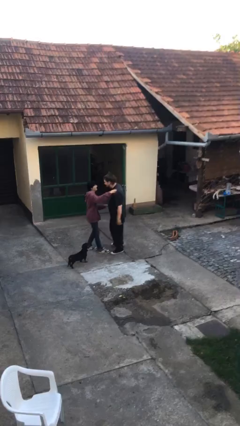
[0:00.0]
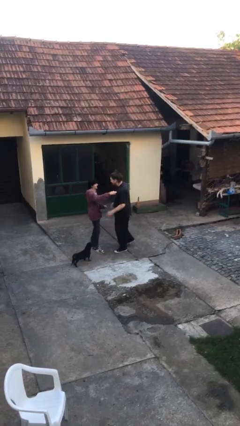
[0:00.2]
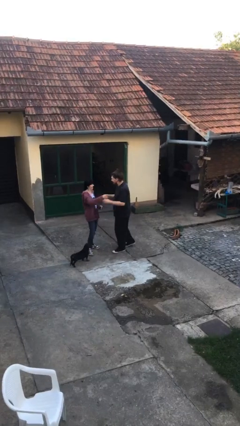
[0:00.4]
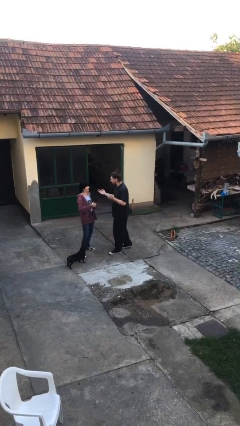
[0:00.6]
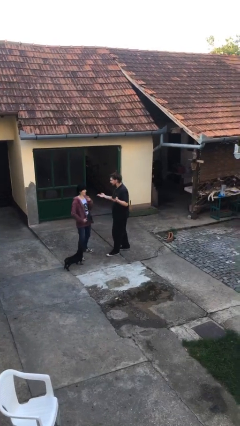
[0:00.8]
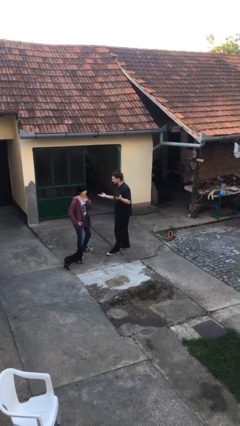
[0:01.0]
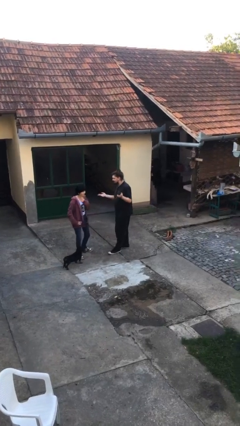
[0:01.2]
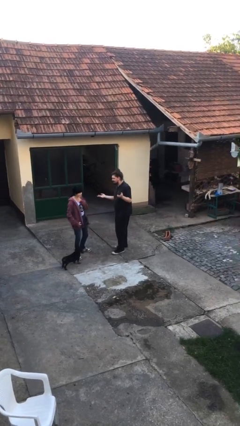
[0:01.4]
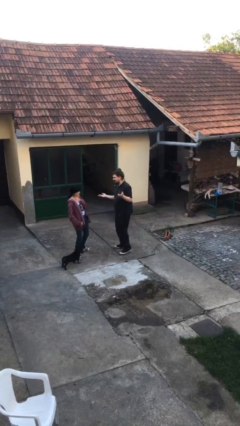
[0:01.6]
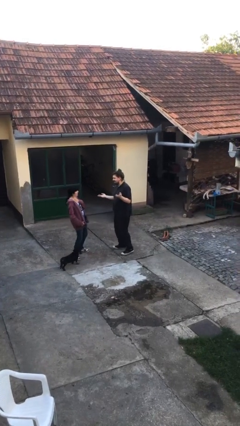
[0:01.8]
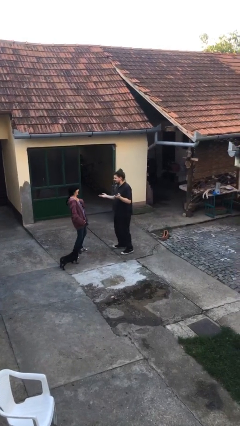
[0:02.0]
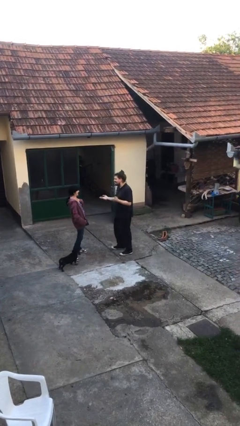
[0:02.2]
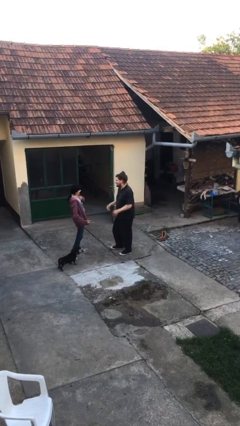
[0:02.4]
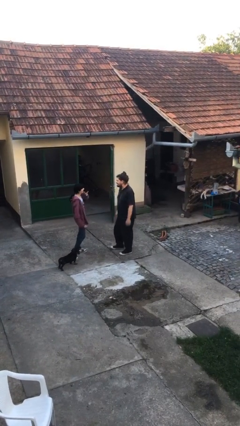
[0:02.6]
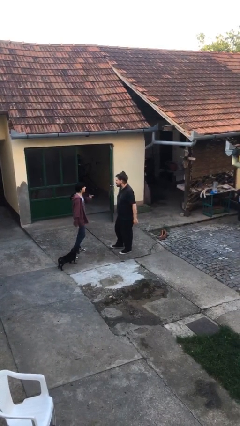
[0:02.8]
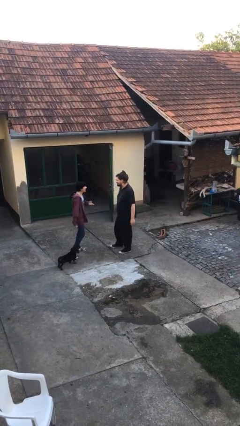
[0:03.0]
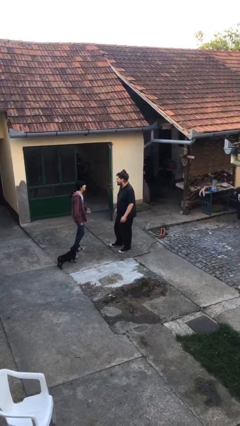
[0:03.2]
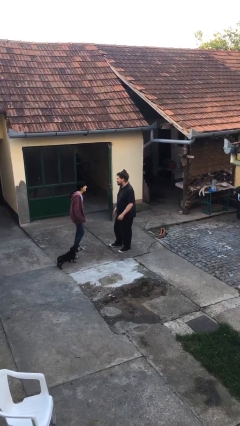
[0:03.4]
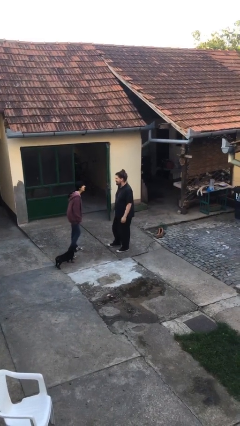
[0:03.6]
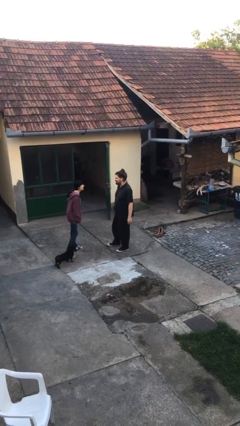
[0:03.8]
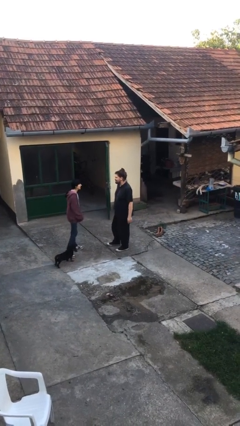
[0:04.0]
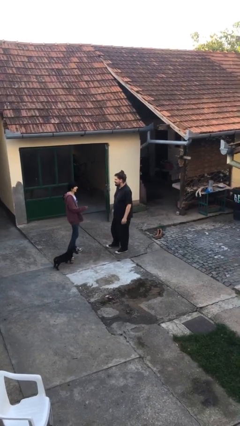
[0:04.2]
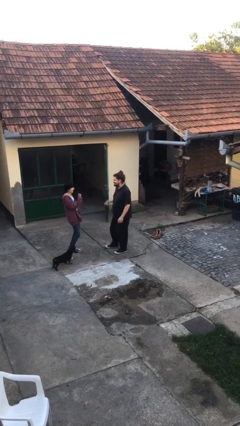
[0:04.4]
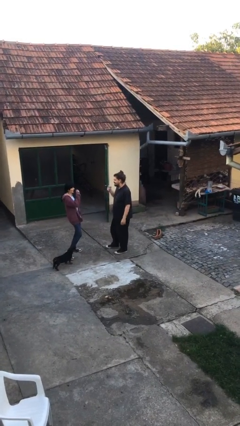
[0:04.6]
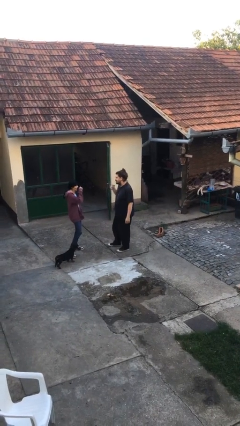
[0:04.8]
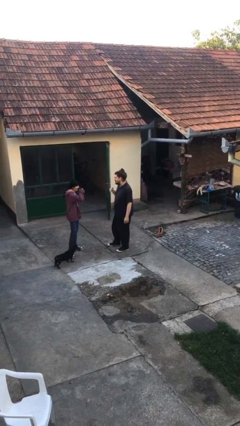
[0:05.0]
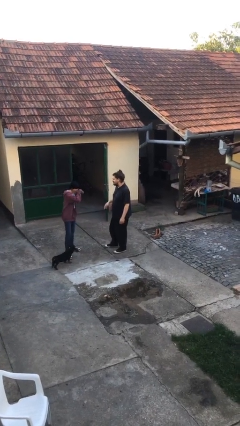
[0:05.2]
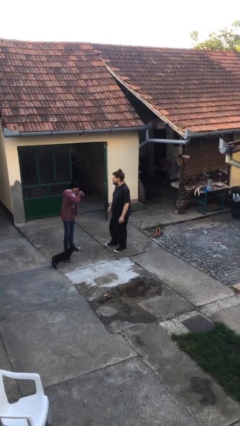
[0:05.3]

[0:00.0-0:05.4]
person talks to person

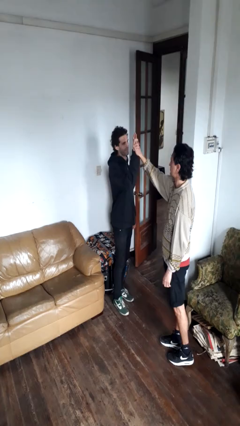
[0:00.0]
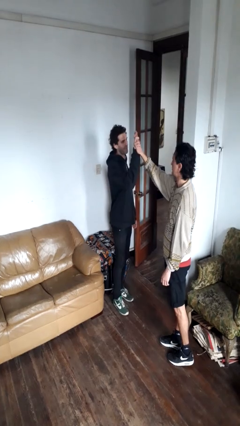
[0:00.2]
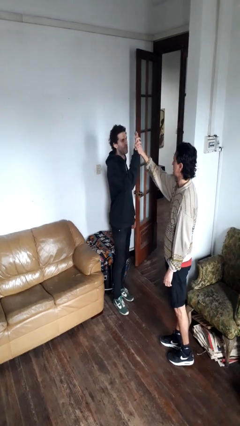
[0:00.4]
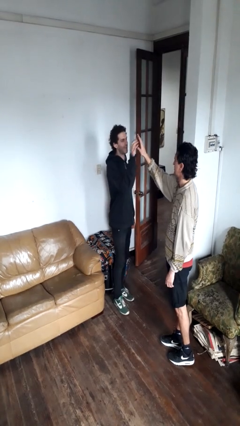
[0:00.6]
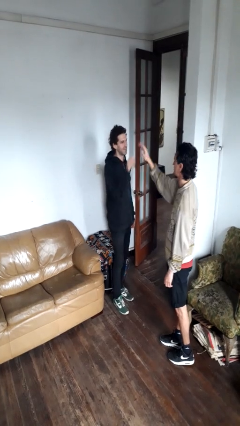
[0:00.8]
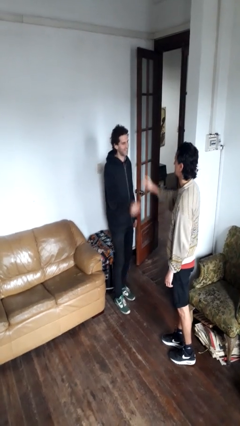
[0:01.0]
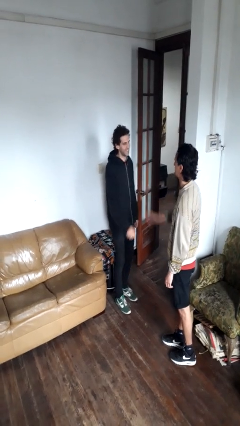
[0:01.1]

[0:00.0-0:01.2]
person highfives hand

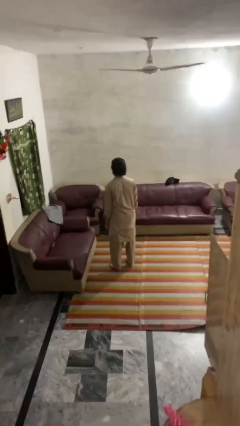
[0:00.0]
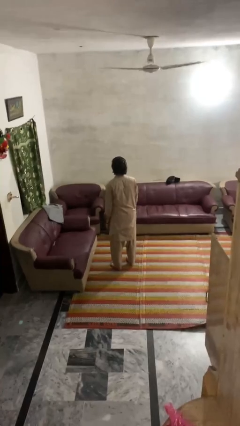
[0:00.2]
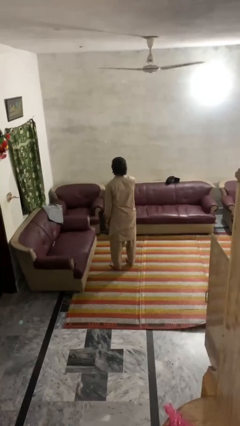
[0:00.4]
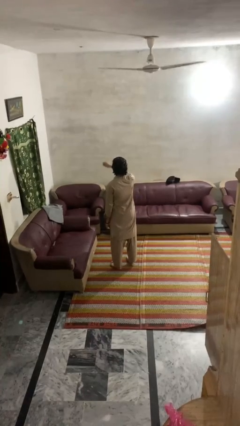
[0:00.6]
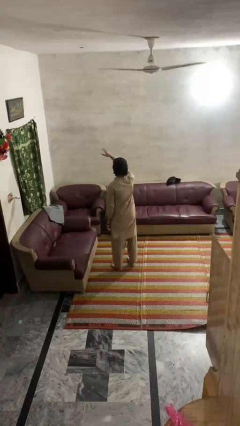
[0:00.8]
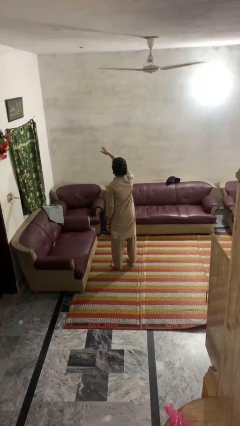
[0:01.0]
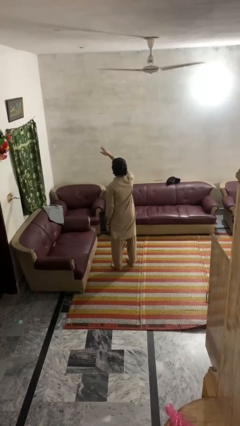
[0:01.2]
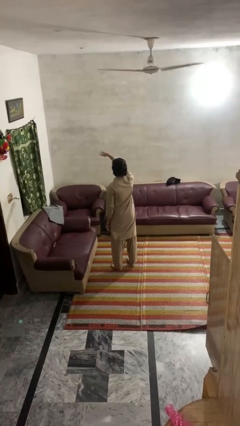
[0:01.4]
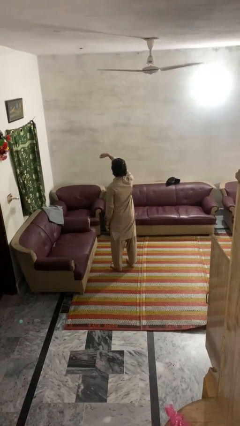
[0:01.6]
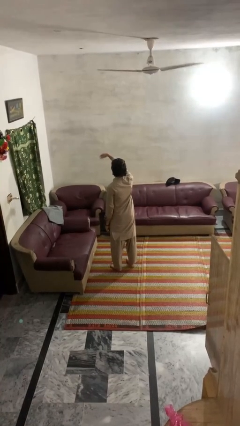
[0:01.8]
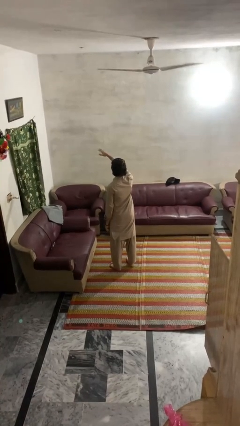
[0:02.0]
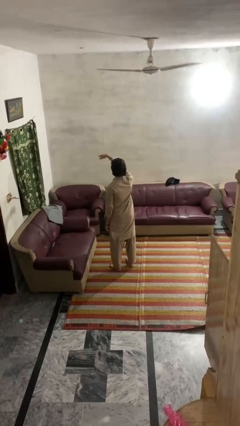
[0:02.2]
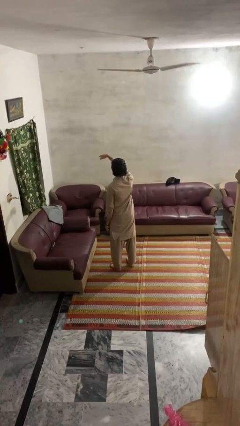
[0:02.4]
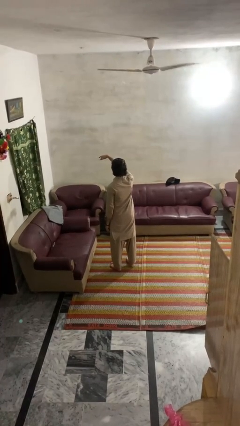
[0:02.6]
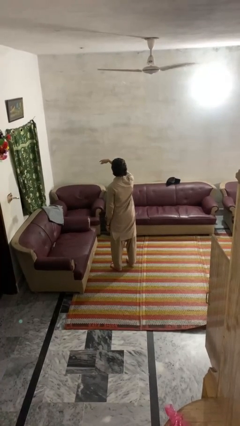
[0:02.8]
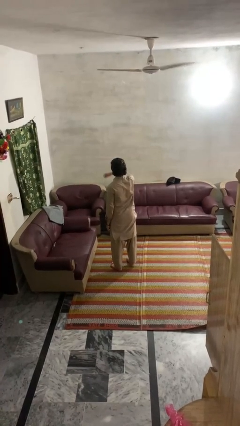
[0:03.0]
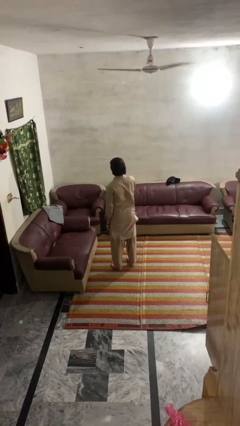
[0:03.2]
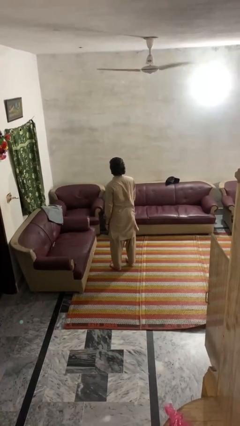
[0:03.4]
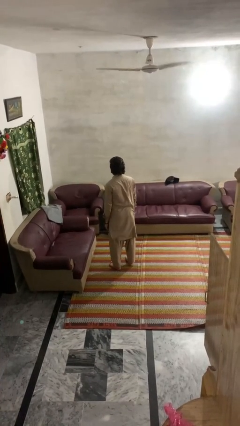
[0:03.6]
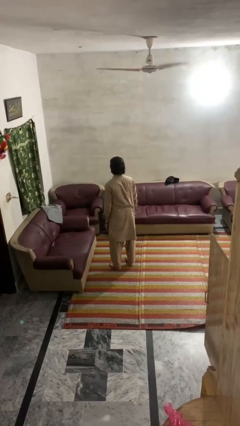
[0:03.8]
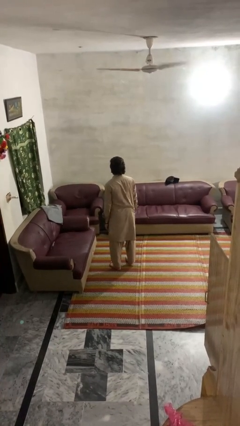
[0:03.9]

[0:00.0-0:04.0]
person gestures come here

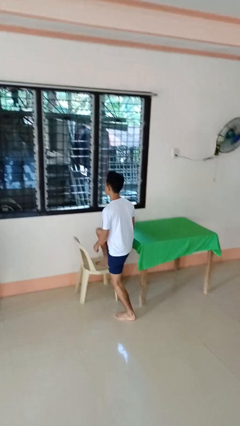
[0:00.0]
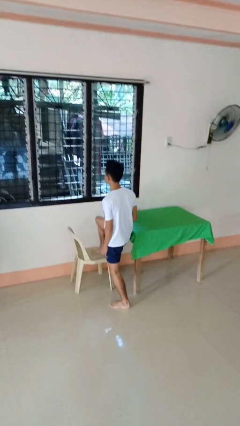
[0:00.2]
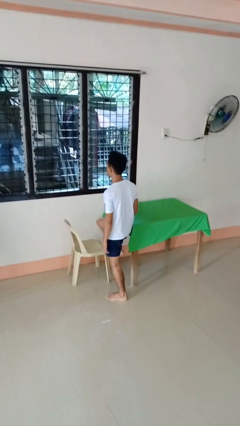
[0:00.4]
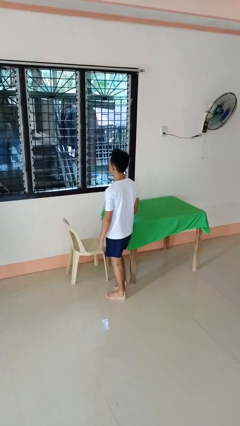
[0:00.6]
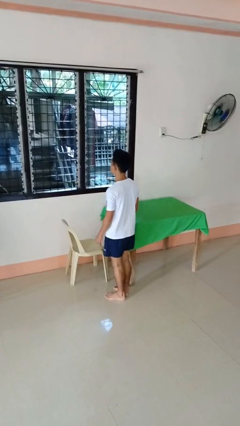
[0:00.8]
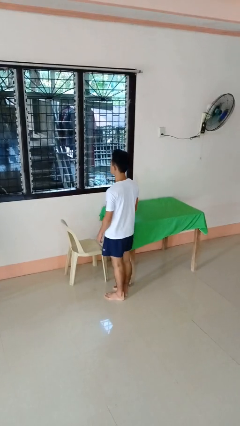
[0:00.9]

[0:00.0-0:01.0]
person climbs off chair

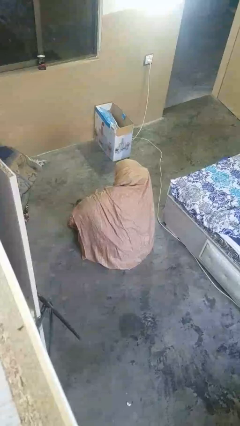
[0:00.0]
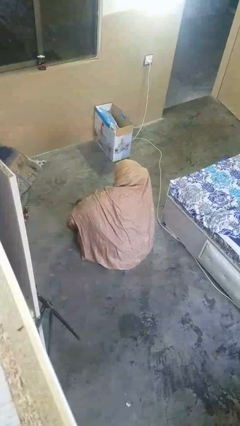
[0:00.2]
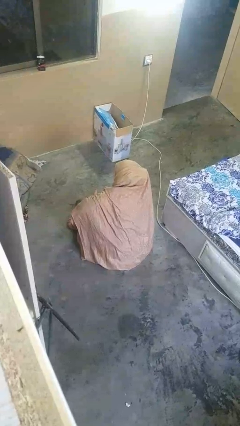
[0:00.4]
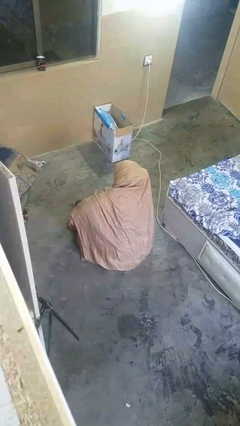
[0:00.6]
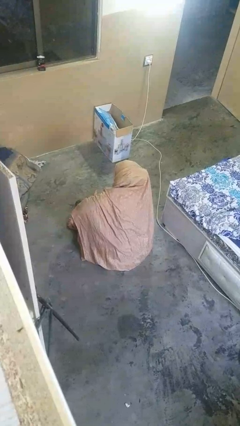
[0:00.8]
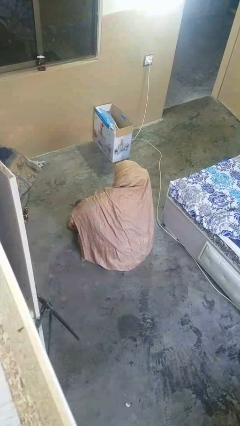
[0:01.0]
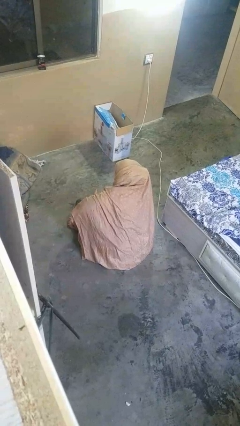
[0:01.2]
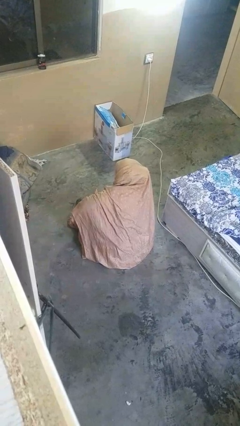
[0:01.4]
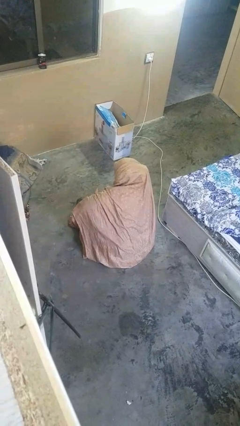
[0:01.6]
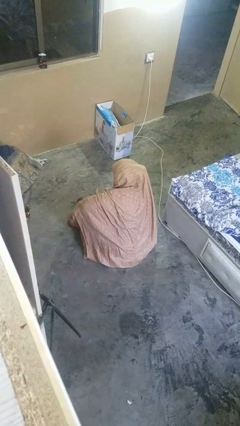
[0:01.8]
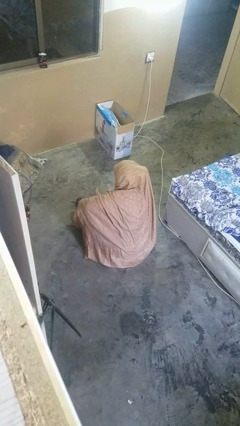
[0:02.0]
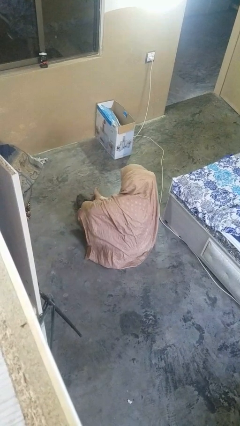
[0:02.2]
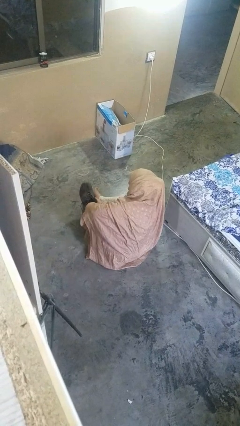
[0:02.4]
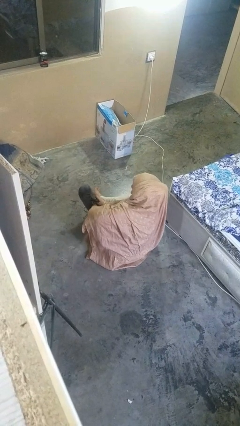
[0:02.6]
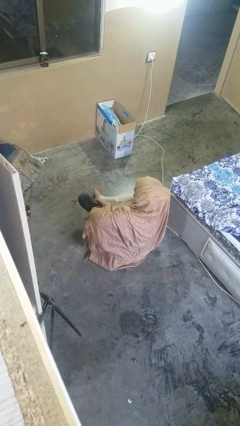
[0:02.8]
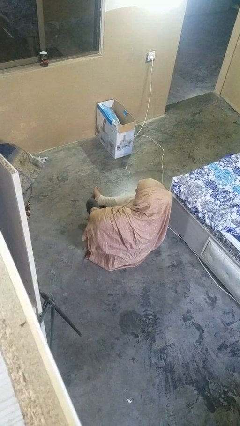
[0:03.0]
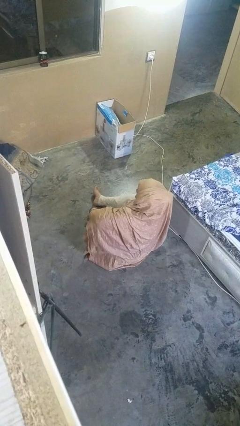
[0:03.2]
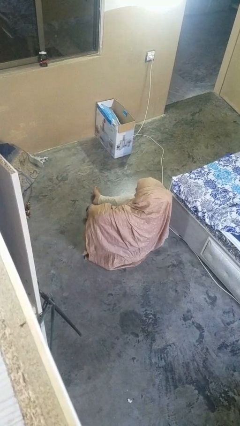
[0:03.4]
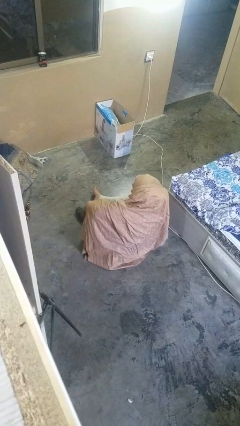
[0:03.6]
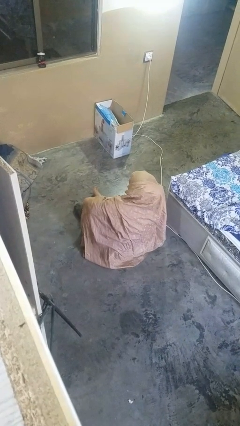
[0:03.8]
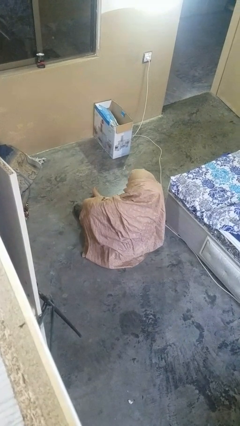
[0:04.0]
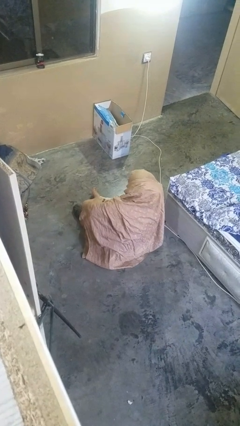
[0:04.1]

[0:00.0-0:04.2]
person puts on shoes

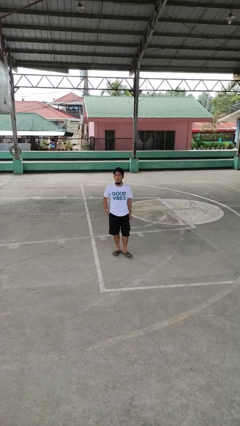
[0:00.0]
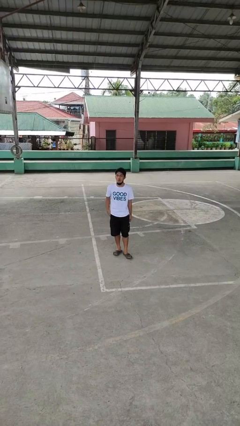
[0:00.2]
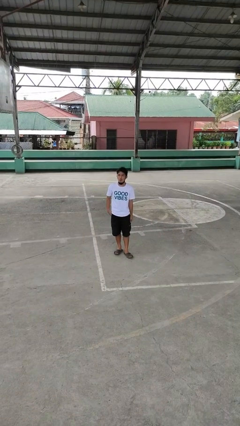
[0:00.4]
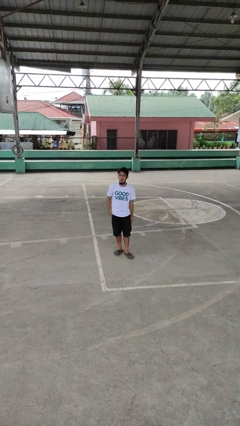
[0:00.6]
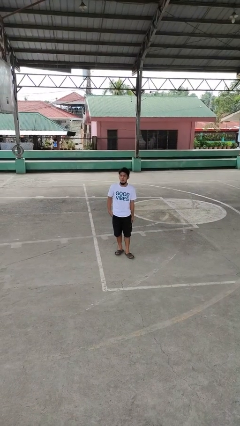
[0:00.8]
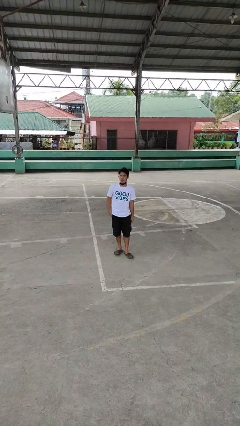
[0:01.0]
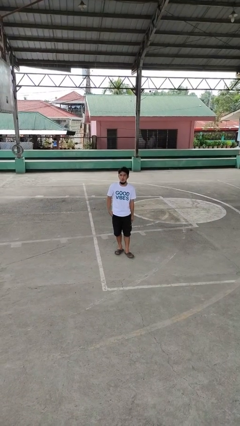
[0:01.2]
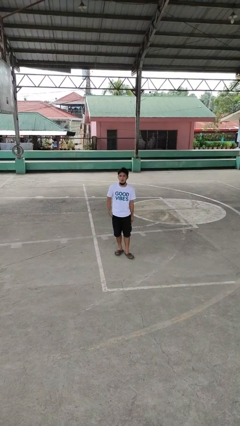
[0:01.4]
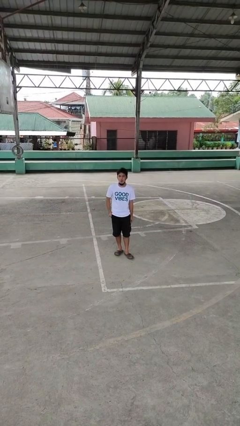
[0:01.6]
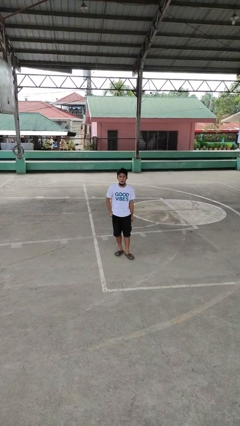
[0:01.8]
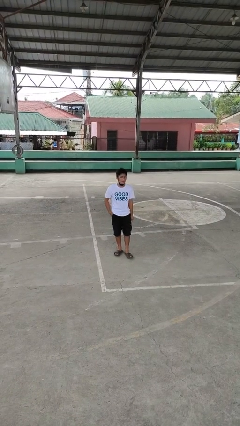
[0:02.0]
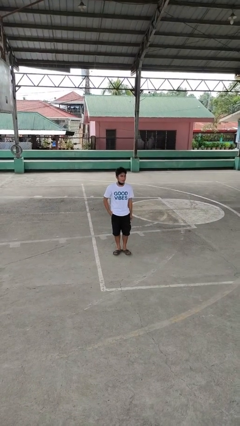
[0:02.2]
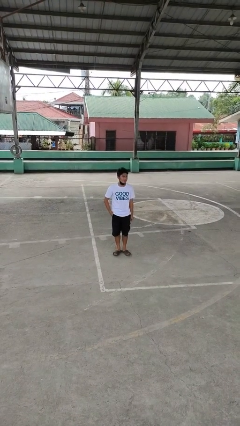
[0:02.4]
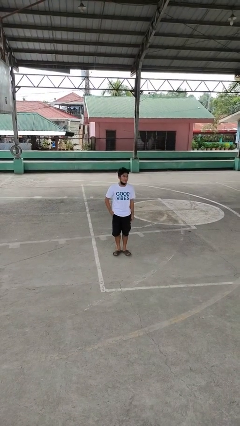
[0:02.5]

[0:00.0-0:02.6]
person sticks out tongue
